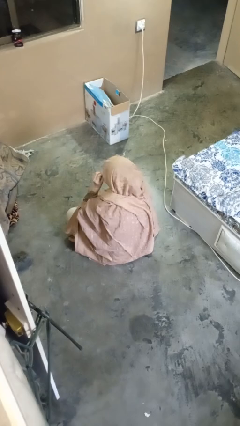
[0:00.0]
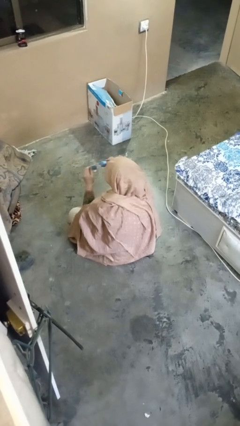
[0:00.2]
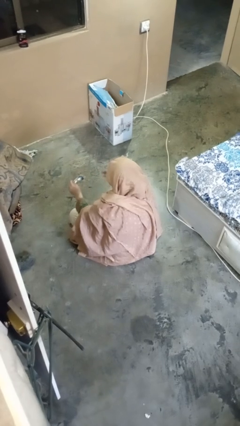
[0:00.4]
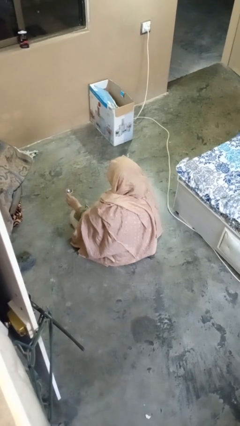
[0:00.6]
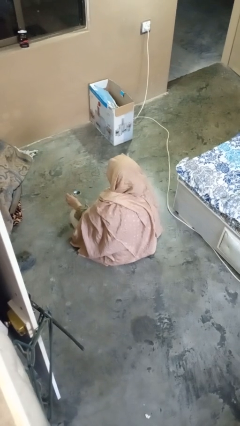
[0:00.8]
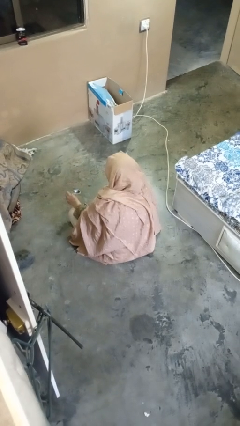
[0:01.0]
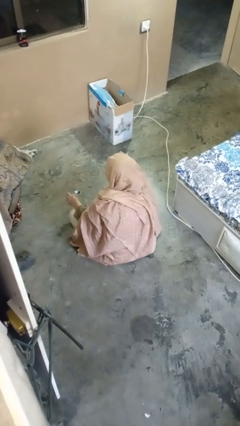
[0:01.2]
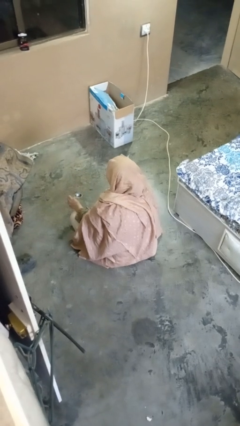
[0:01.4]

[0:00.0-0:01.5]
person takes off glasses

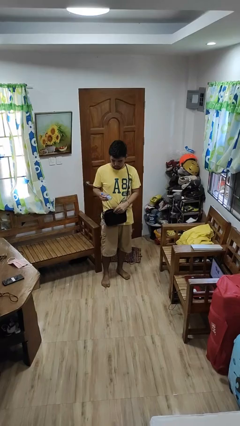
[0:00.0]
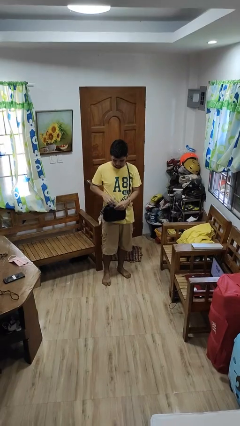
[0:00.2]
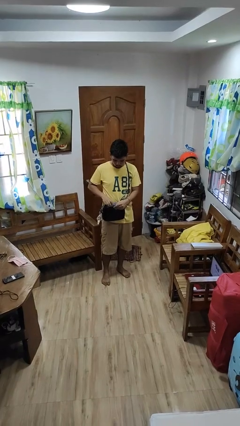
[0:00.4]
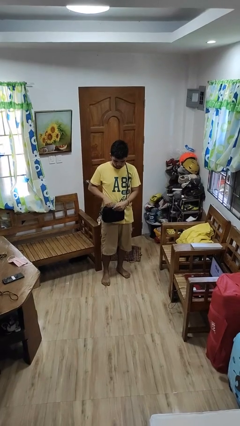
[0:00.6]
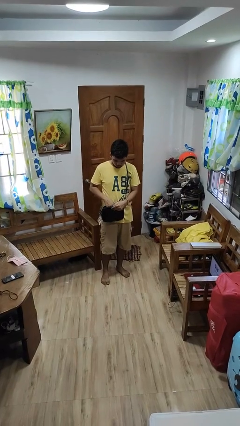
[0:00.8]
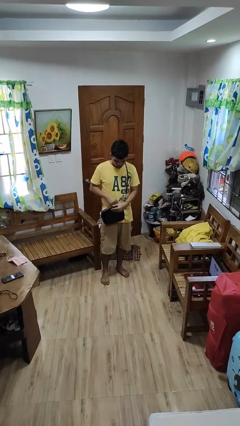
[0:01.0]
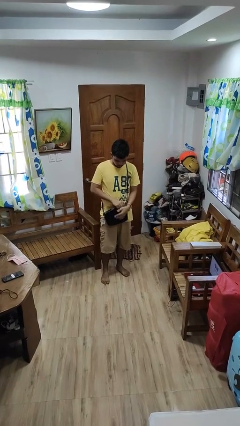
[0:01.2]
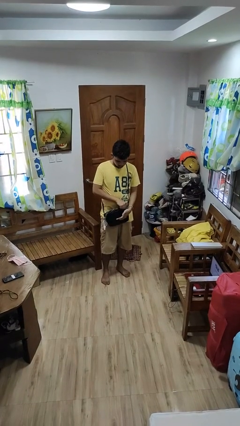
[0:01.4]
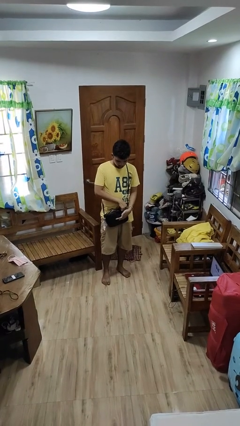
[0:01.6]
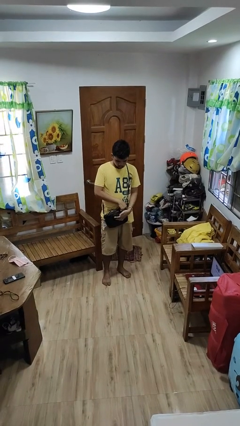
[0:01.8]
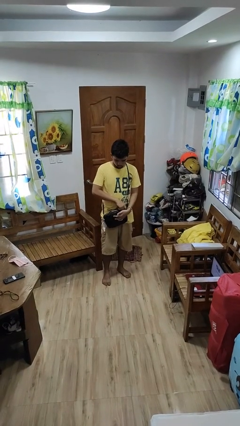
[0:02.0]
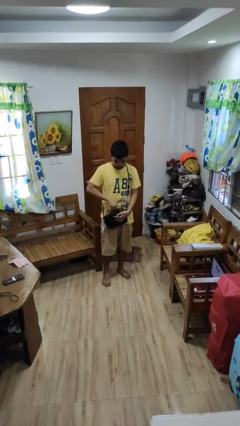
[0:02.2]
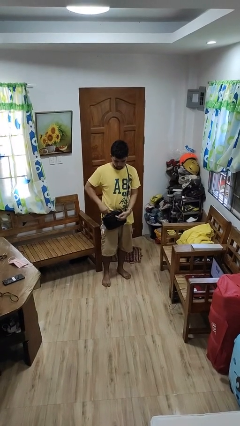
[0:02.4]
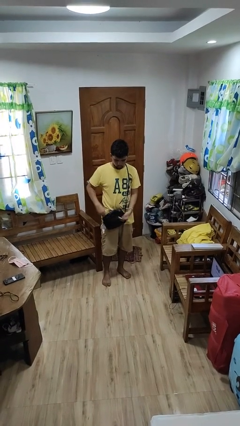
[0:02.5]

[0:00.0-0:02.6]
person puts object into purse

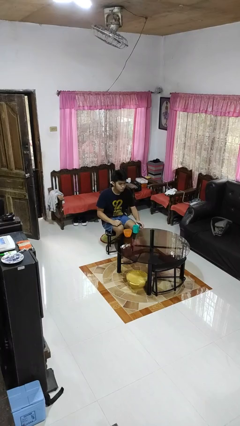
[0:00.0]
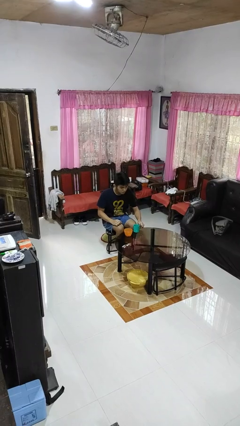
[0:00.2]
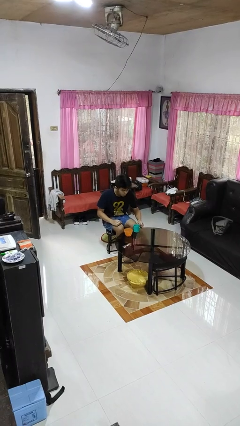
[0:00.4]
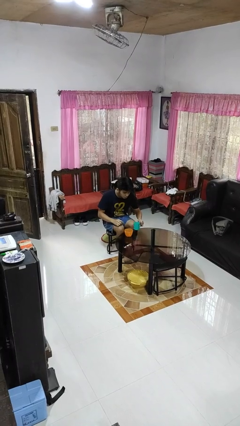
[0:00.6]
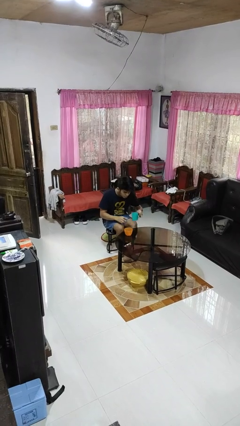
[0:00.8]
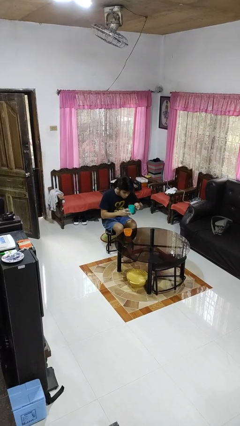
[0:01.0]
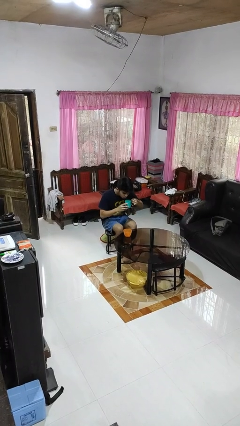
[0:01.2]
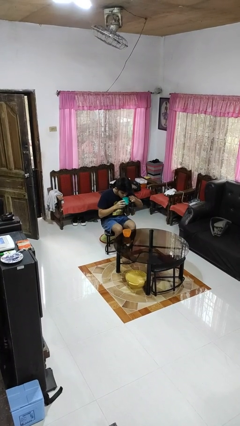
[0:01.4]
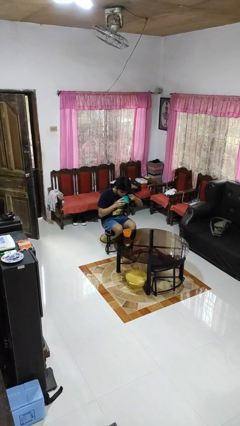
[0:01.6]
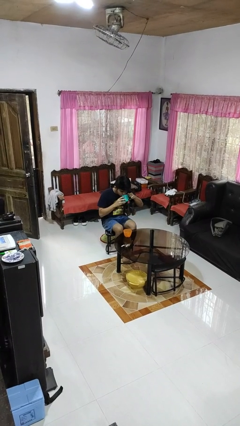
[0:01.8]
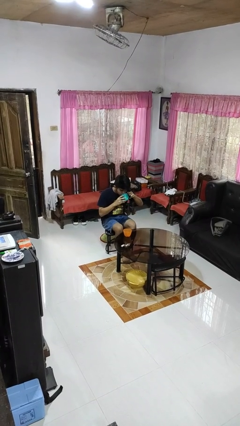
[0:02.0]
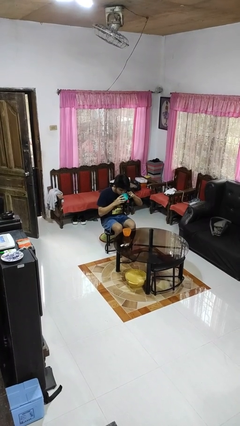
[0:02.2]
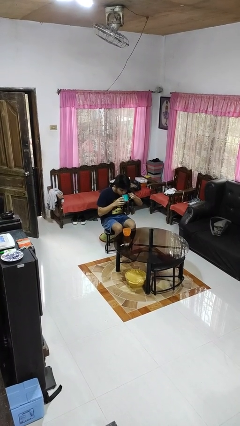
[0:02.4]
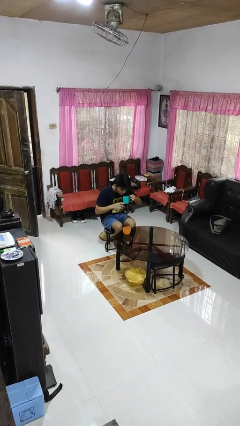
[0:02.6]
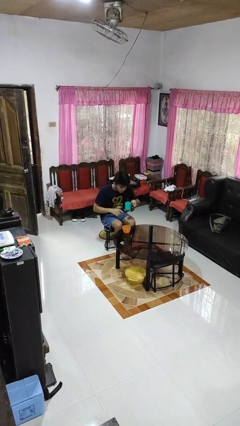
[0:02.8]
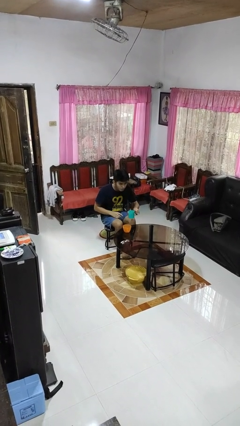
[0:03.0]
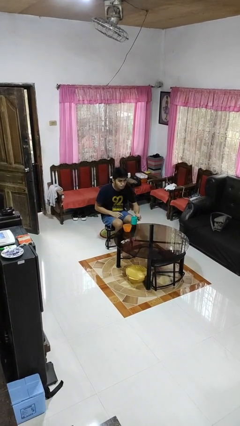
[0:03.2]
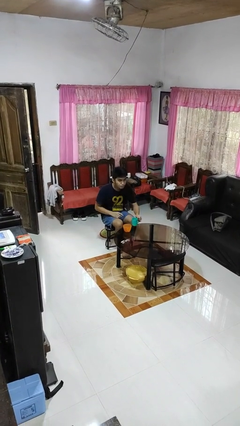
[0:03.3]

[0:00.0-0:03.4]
person drinks from cup

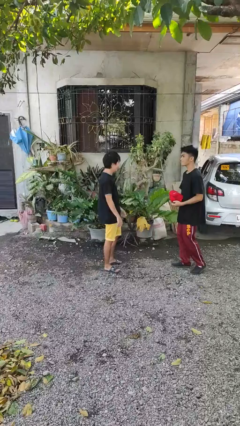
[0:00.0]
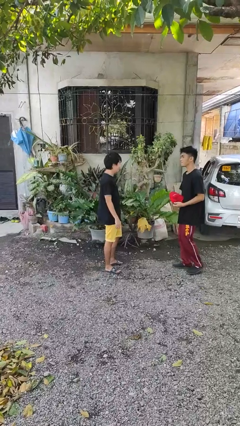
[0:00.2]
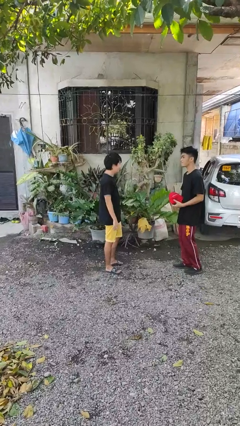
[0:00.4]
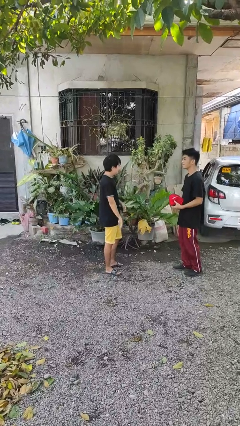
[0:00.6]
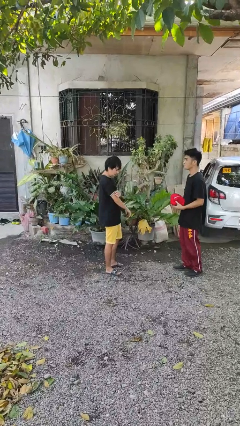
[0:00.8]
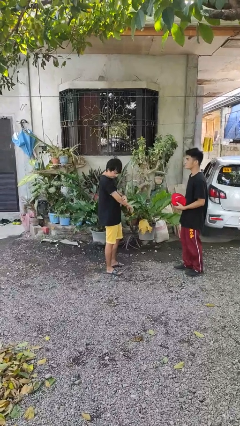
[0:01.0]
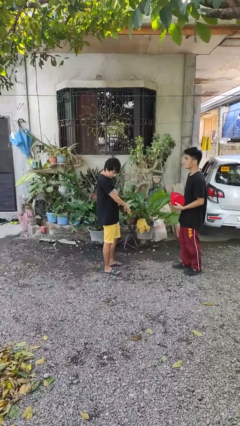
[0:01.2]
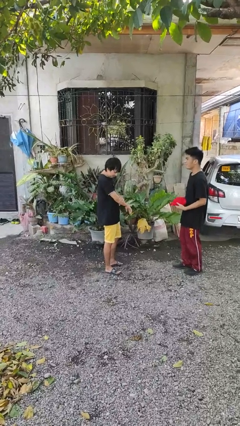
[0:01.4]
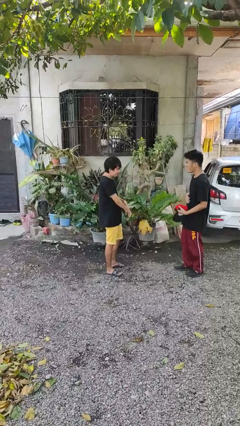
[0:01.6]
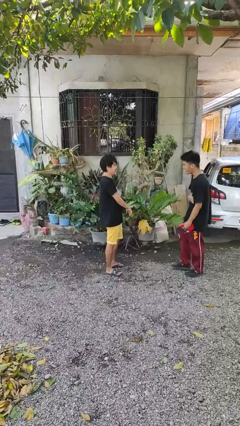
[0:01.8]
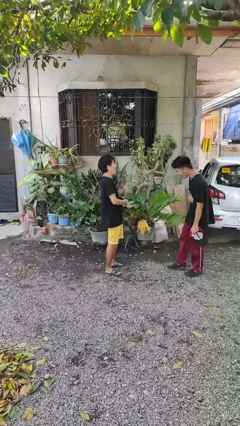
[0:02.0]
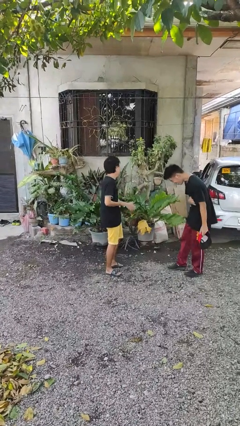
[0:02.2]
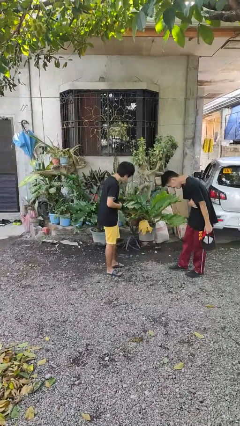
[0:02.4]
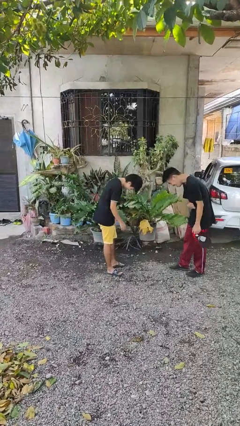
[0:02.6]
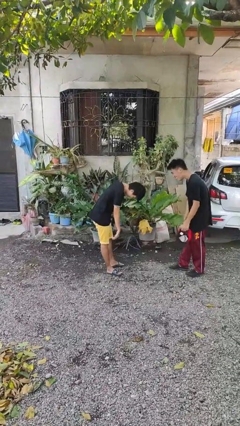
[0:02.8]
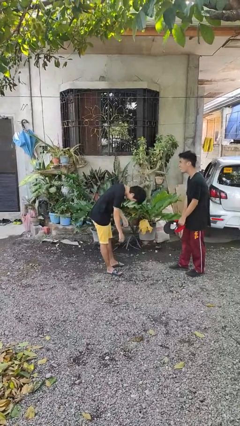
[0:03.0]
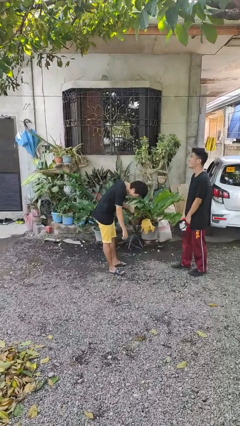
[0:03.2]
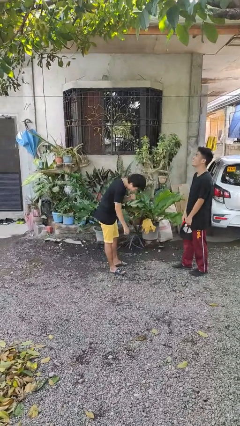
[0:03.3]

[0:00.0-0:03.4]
person laughs with person

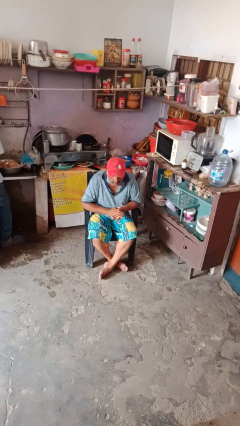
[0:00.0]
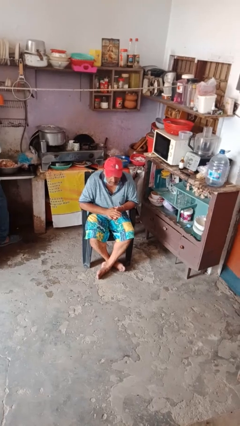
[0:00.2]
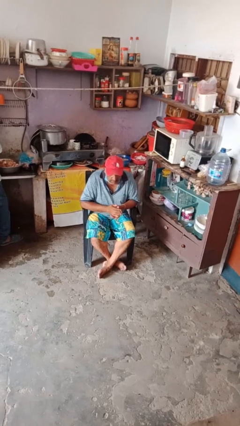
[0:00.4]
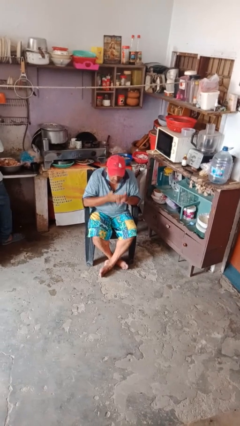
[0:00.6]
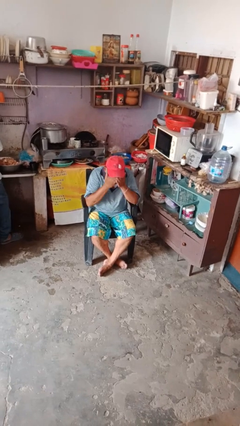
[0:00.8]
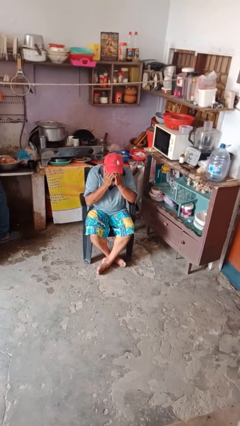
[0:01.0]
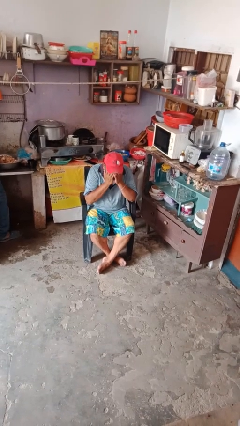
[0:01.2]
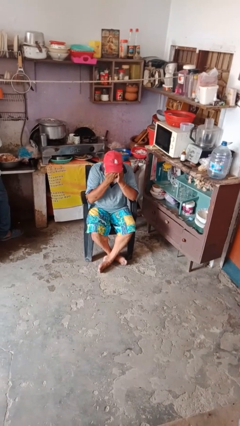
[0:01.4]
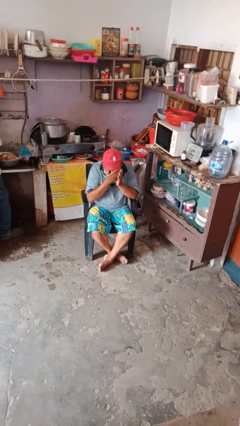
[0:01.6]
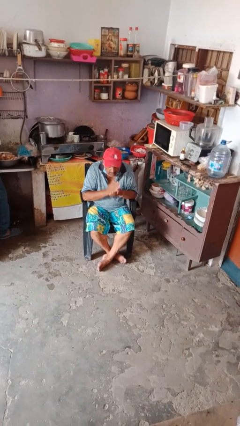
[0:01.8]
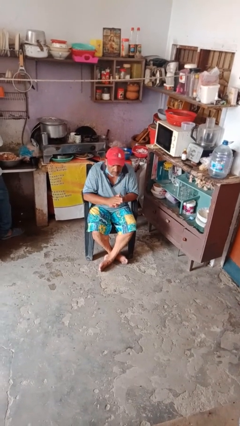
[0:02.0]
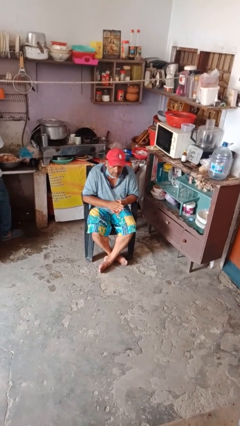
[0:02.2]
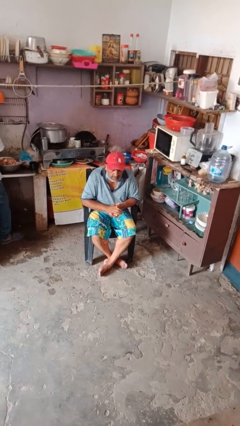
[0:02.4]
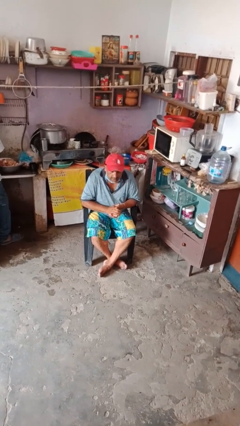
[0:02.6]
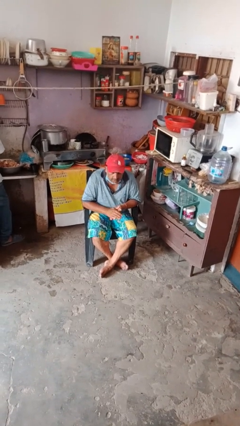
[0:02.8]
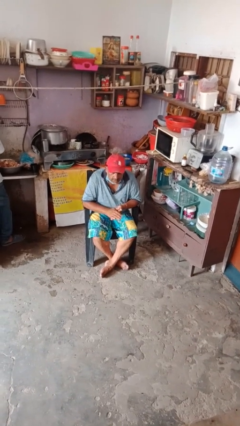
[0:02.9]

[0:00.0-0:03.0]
person applies foundation makeup

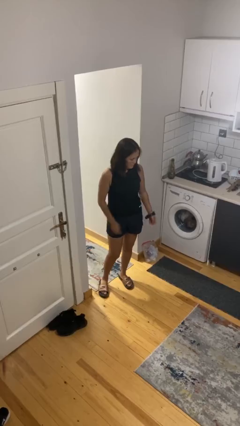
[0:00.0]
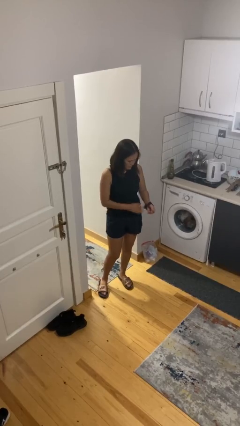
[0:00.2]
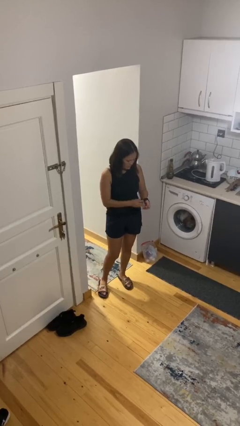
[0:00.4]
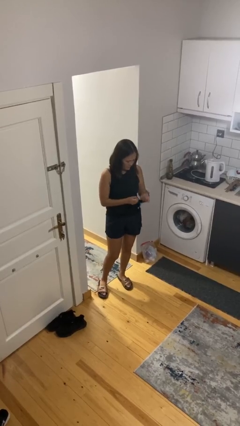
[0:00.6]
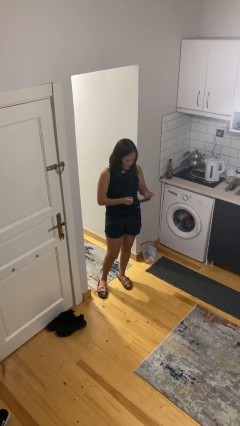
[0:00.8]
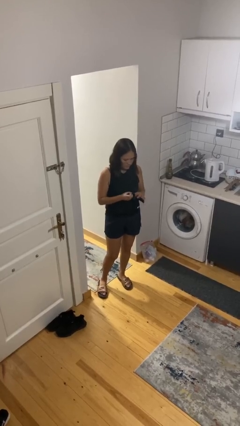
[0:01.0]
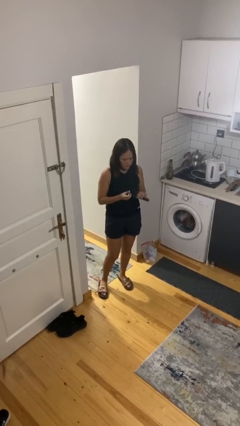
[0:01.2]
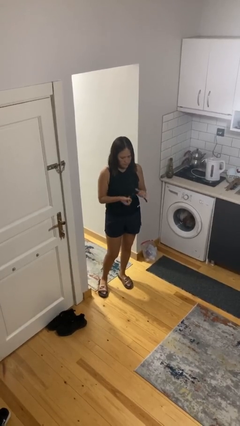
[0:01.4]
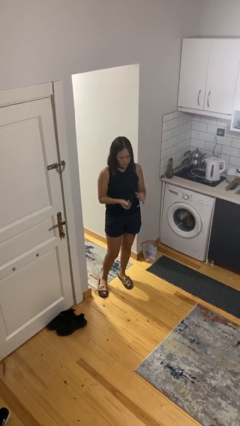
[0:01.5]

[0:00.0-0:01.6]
person takes off wristwatch

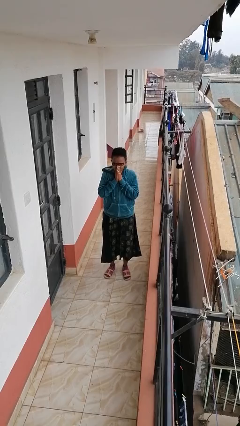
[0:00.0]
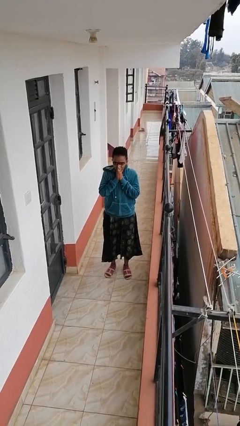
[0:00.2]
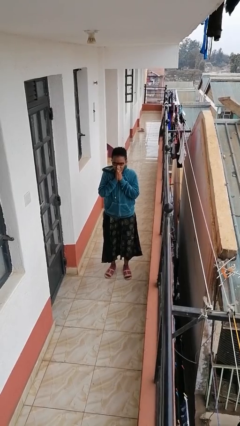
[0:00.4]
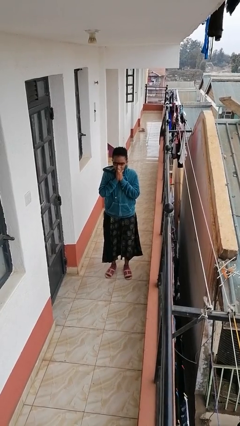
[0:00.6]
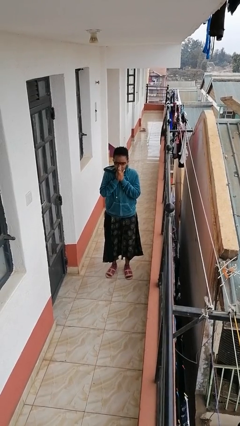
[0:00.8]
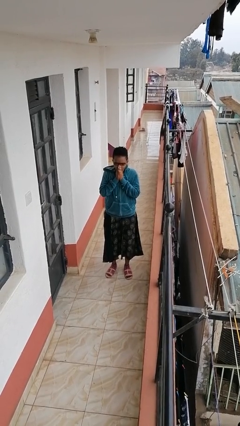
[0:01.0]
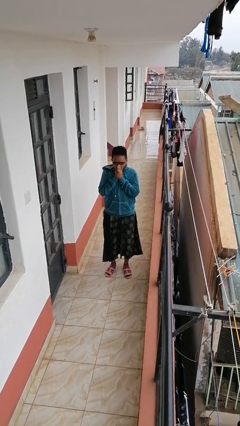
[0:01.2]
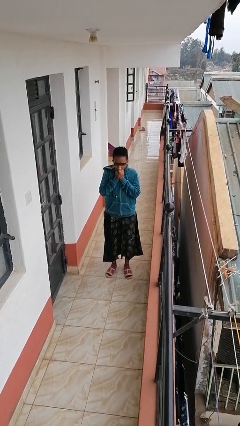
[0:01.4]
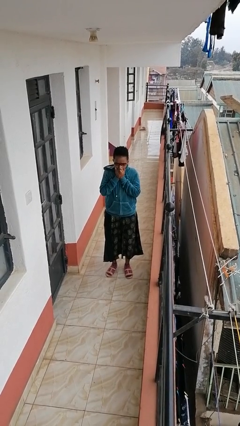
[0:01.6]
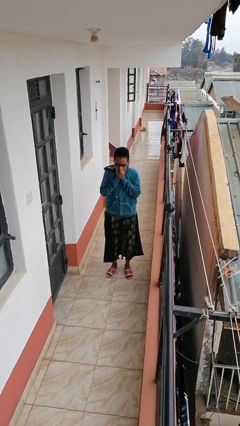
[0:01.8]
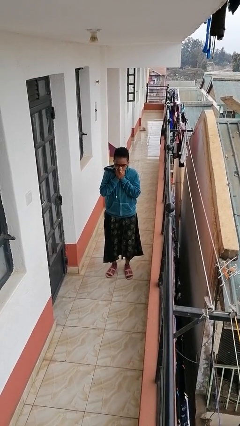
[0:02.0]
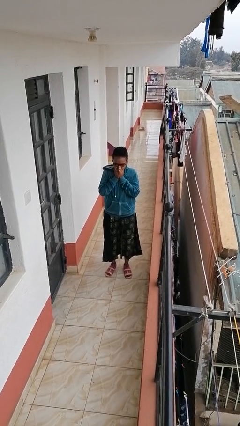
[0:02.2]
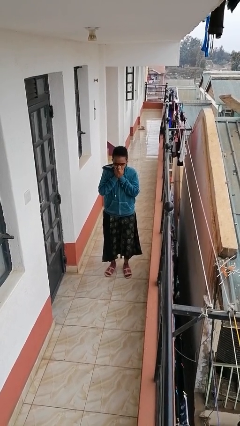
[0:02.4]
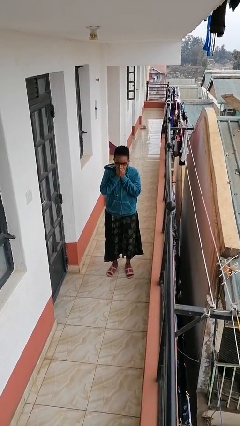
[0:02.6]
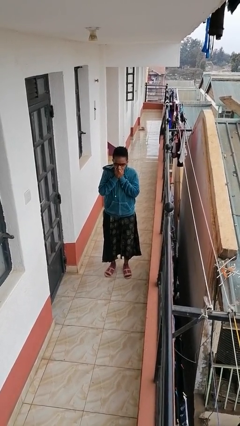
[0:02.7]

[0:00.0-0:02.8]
person blows into hands
